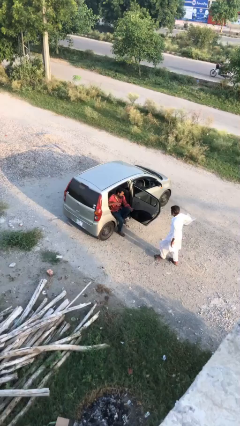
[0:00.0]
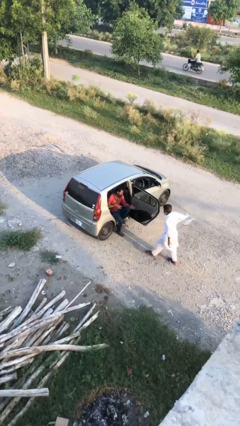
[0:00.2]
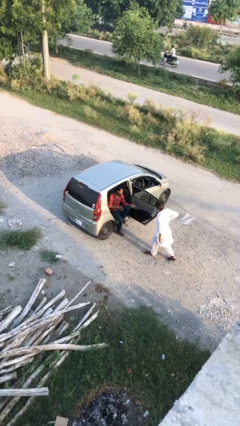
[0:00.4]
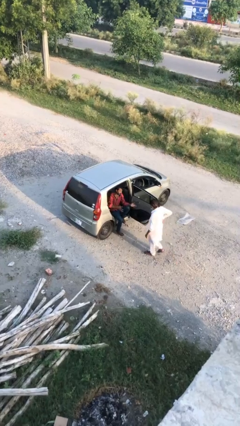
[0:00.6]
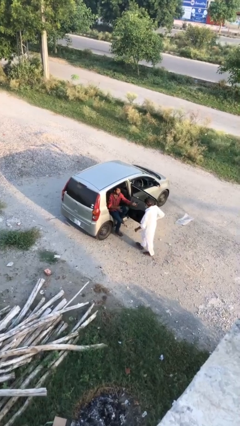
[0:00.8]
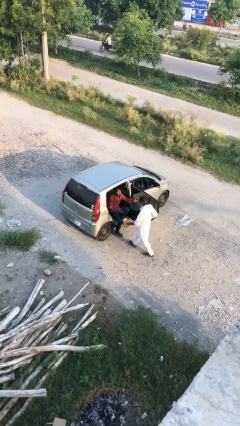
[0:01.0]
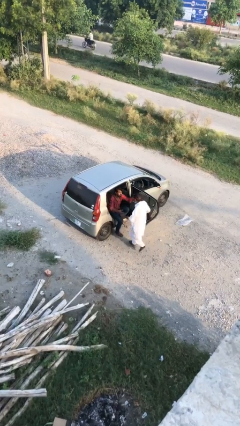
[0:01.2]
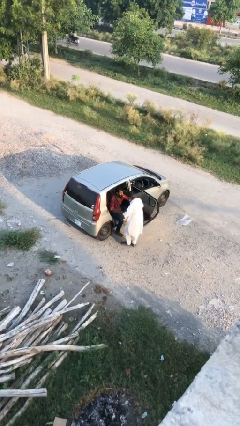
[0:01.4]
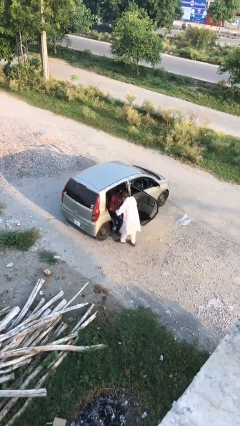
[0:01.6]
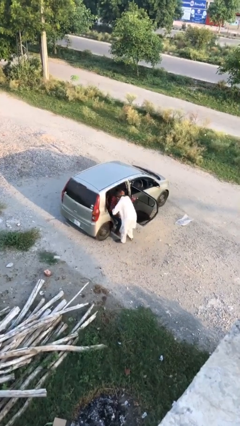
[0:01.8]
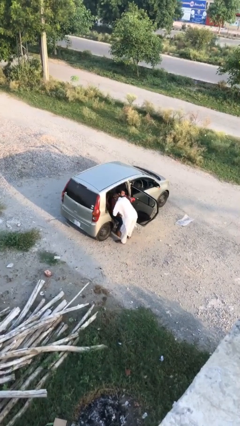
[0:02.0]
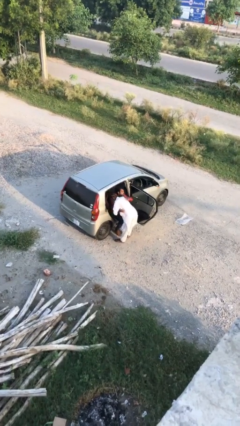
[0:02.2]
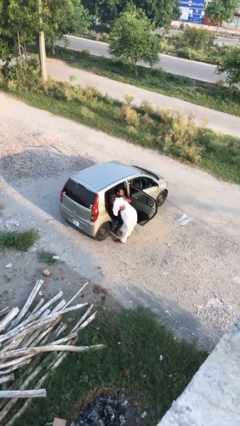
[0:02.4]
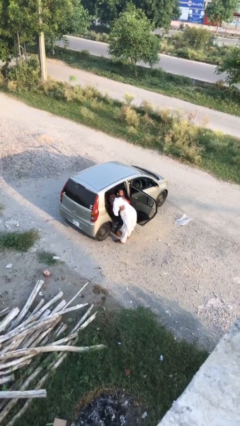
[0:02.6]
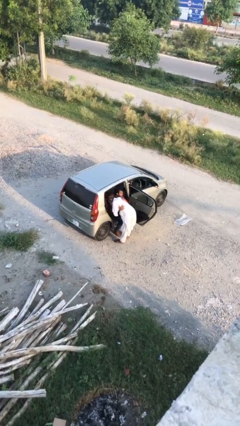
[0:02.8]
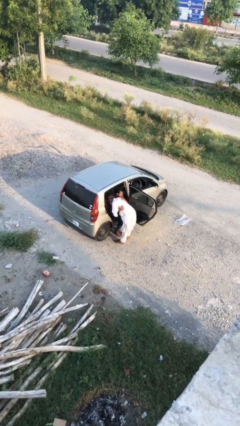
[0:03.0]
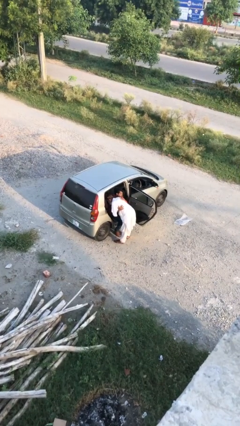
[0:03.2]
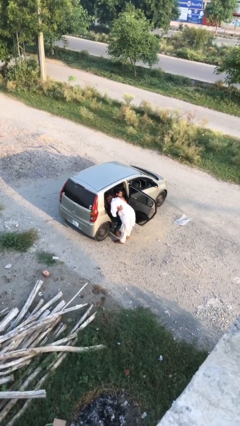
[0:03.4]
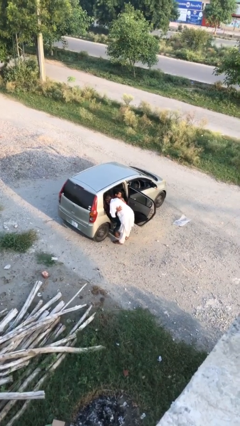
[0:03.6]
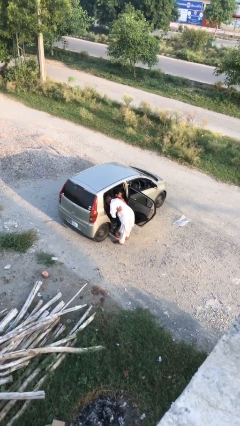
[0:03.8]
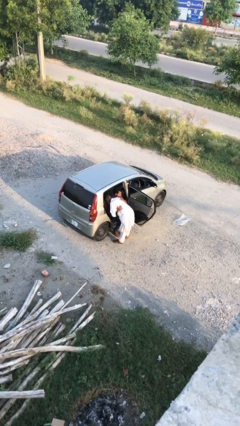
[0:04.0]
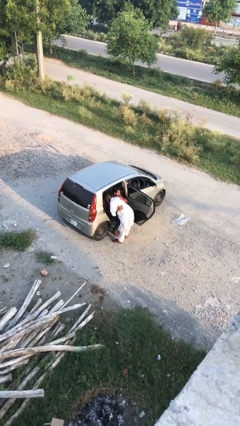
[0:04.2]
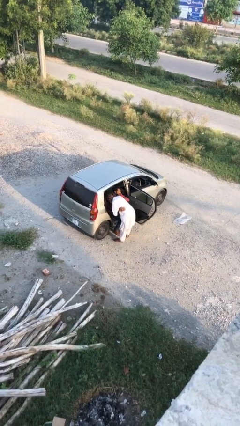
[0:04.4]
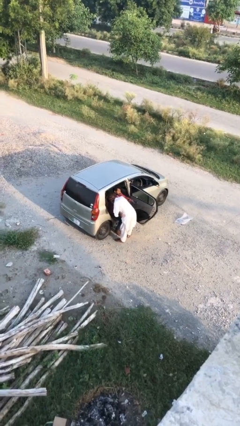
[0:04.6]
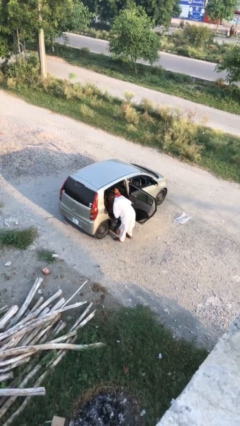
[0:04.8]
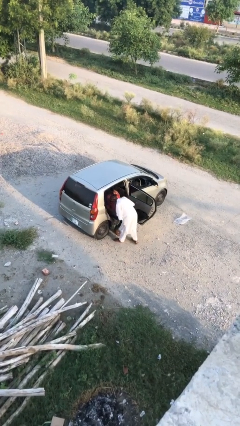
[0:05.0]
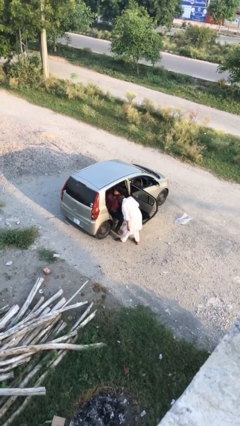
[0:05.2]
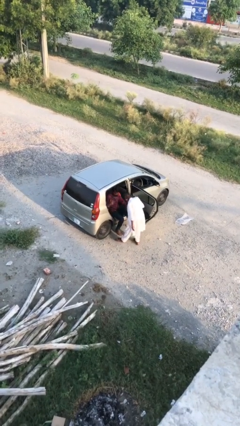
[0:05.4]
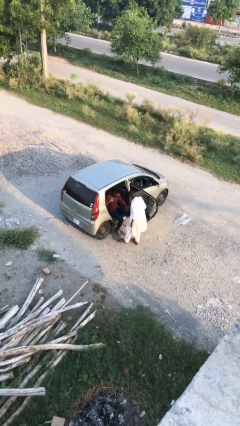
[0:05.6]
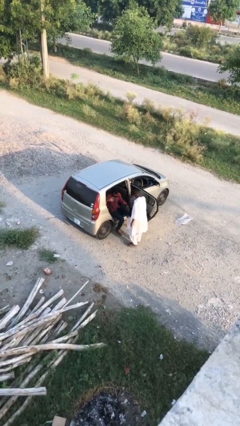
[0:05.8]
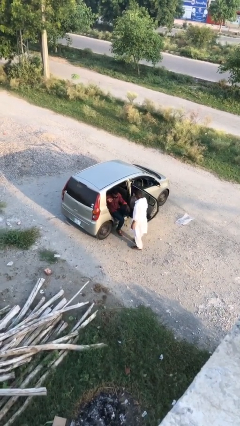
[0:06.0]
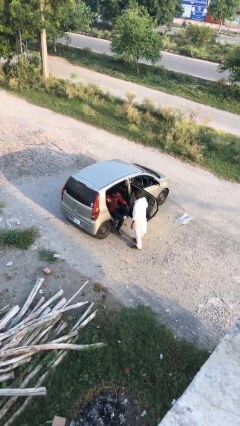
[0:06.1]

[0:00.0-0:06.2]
person embraces person
